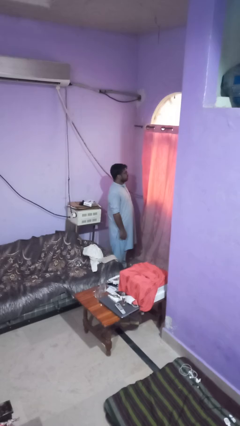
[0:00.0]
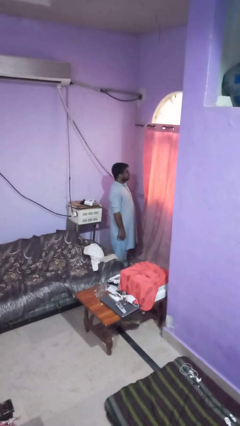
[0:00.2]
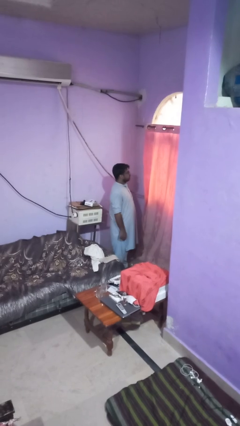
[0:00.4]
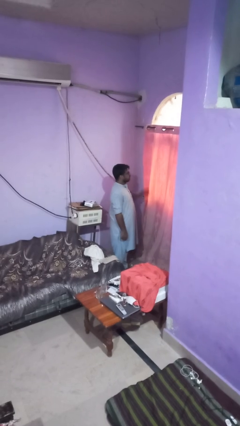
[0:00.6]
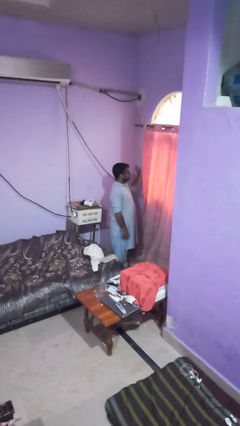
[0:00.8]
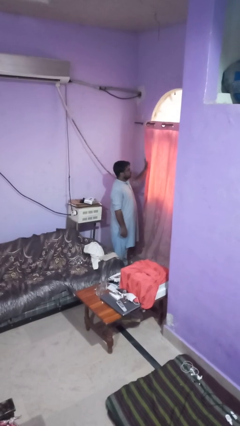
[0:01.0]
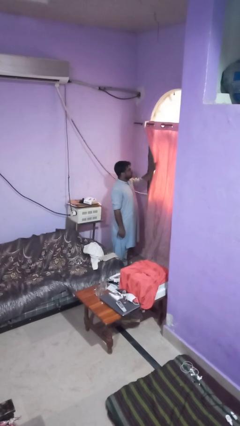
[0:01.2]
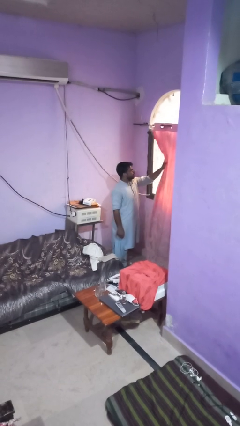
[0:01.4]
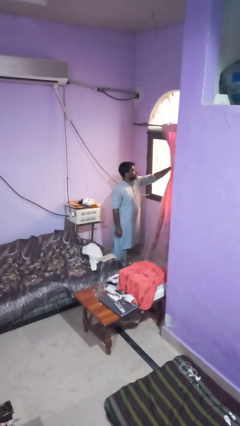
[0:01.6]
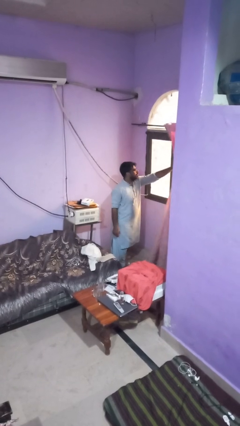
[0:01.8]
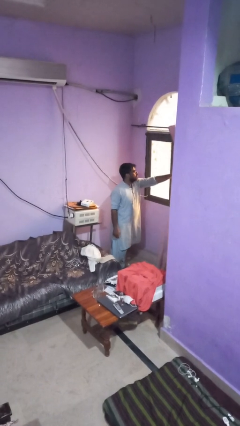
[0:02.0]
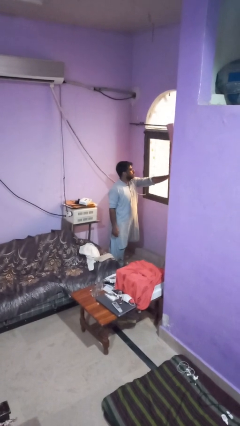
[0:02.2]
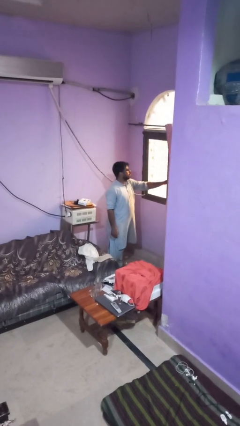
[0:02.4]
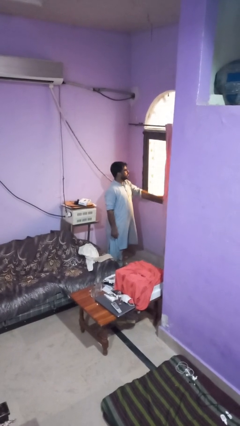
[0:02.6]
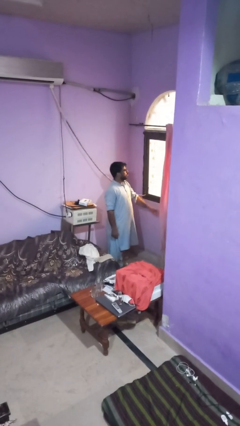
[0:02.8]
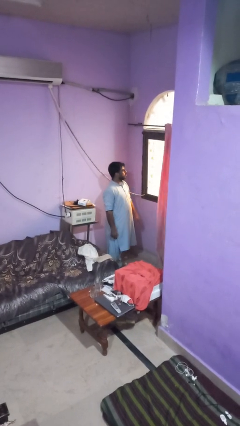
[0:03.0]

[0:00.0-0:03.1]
person opens curtains

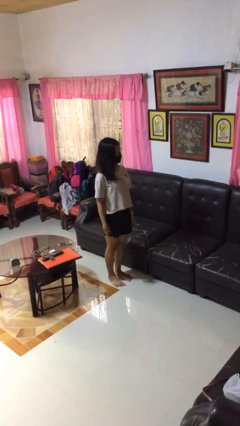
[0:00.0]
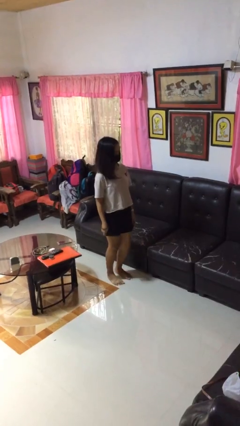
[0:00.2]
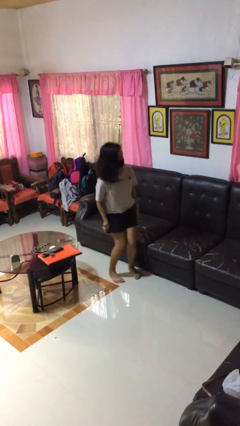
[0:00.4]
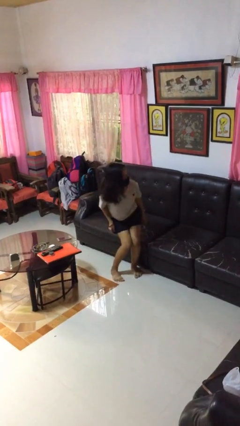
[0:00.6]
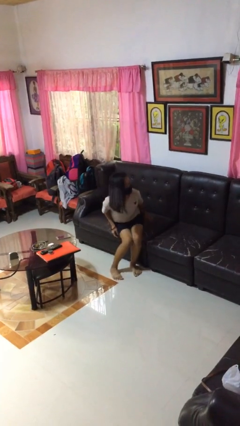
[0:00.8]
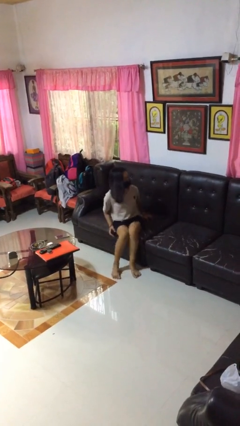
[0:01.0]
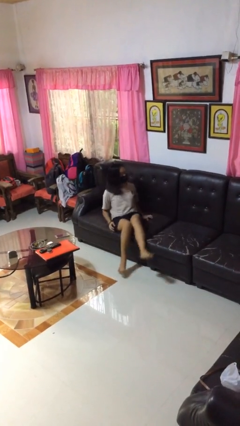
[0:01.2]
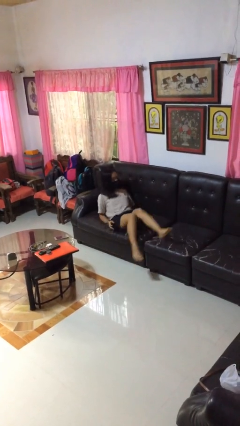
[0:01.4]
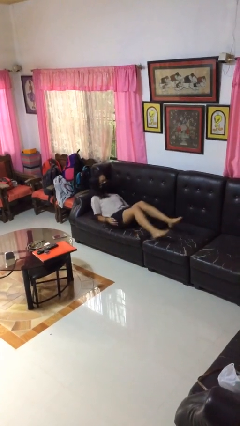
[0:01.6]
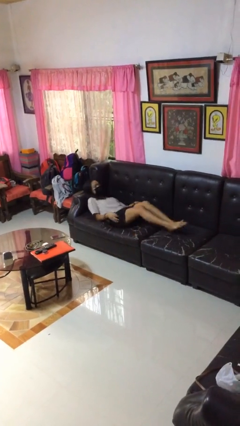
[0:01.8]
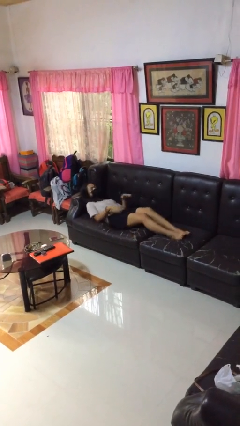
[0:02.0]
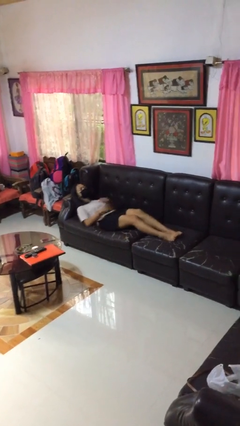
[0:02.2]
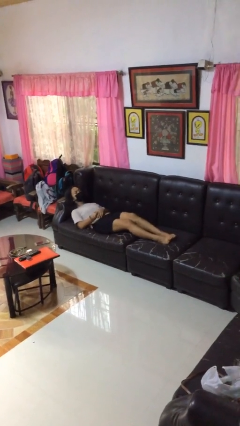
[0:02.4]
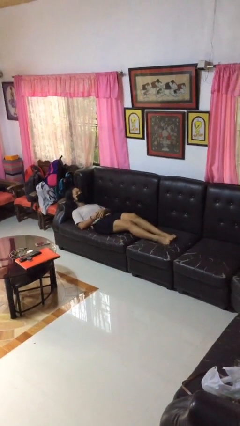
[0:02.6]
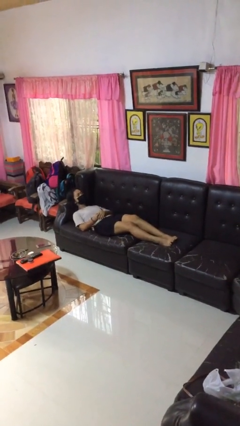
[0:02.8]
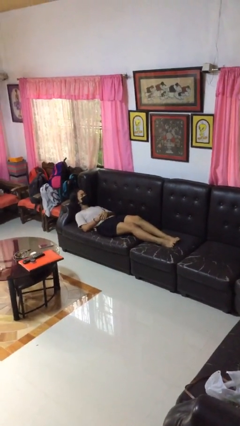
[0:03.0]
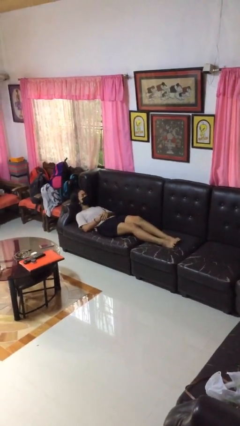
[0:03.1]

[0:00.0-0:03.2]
person lies down on couch

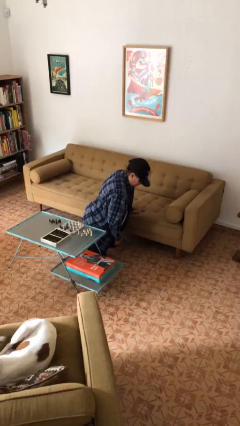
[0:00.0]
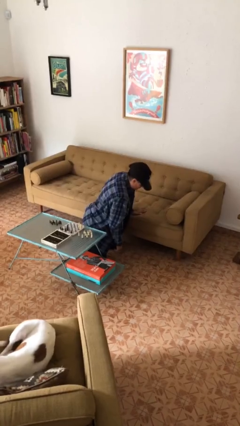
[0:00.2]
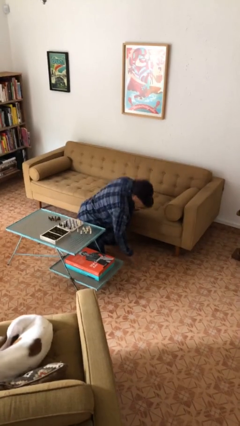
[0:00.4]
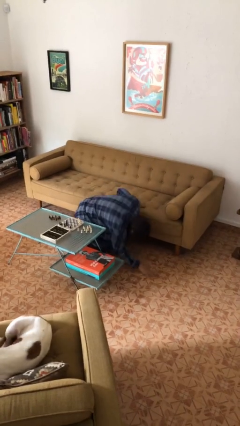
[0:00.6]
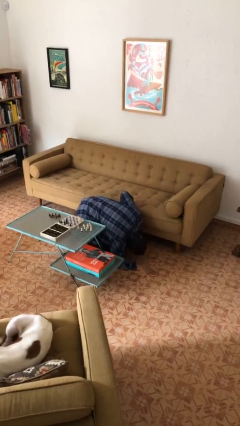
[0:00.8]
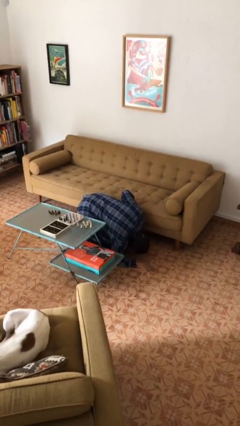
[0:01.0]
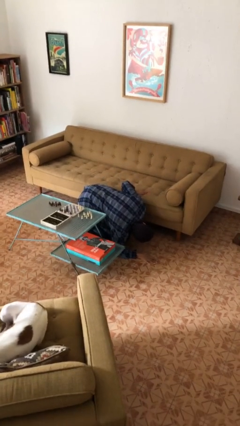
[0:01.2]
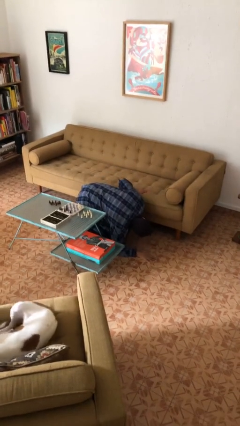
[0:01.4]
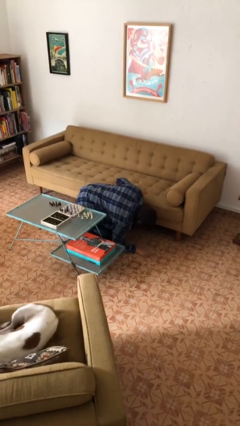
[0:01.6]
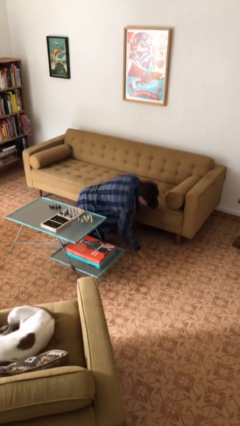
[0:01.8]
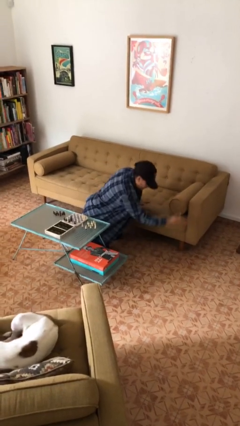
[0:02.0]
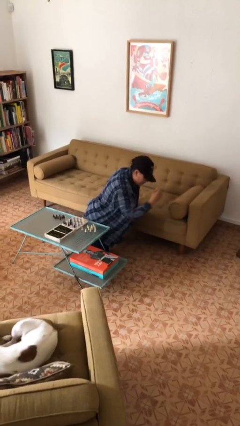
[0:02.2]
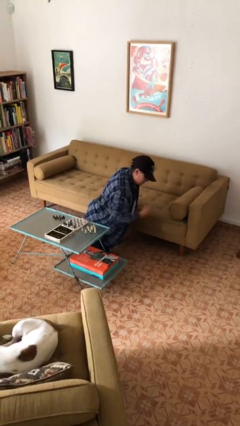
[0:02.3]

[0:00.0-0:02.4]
person searches under couch

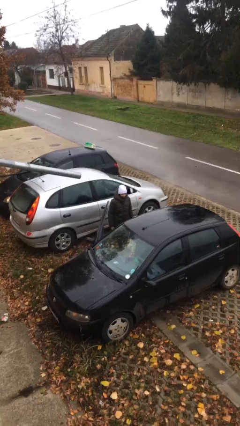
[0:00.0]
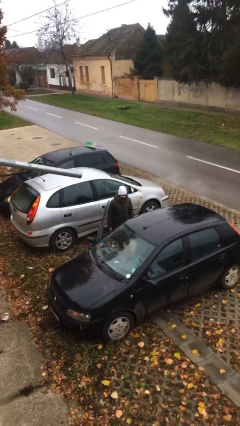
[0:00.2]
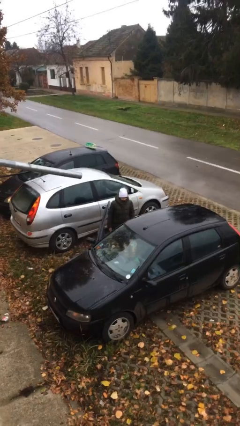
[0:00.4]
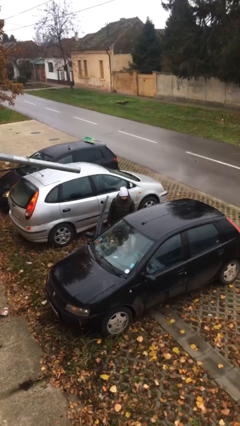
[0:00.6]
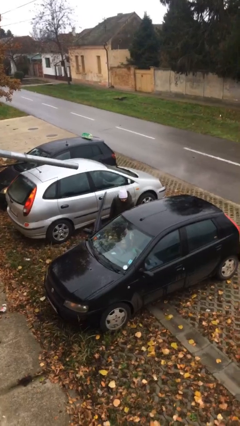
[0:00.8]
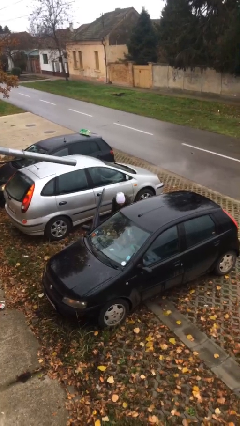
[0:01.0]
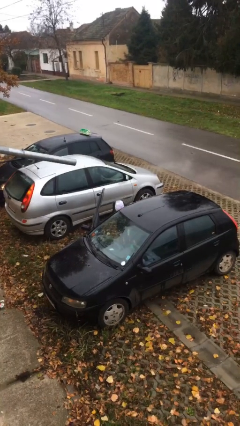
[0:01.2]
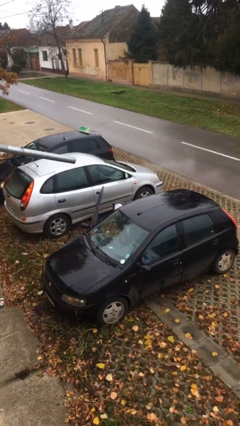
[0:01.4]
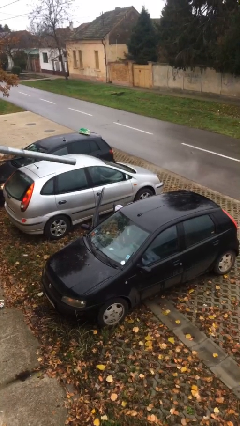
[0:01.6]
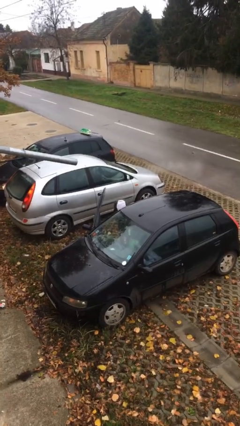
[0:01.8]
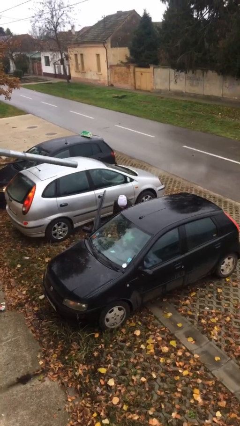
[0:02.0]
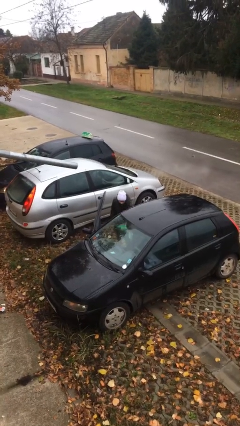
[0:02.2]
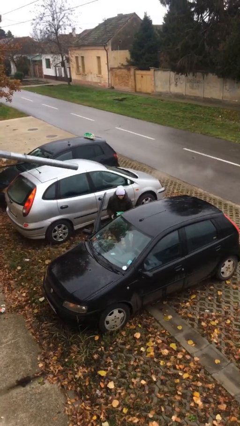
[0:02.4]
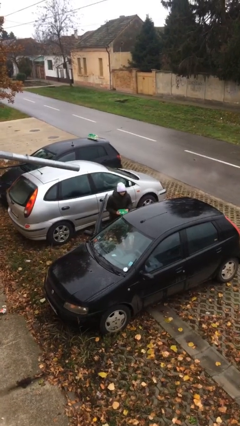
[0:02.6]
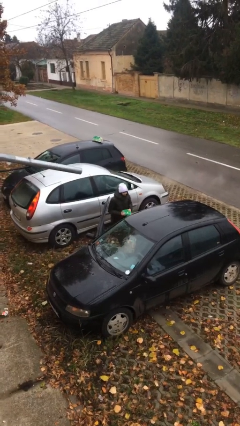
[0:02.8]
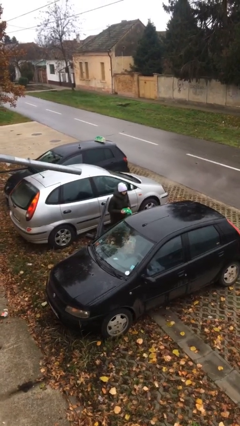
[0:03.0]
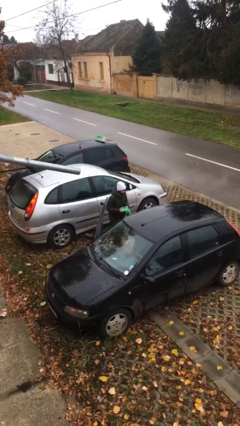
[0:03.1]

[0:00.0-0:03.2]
person unloads car

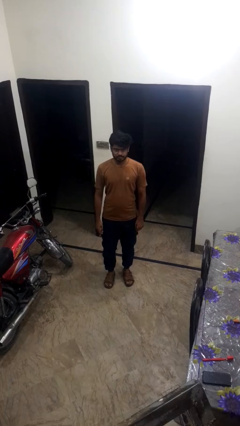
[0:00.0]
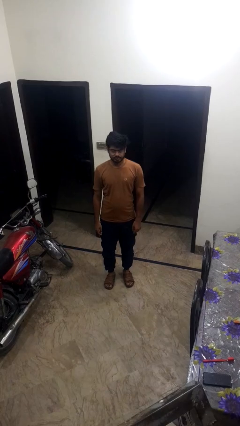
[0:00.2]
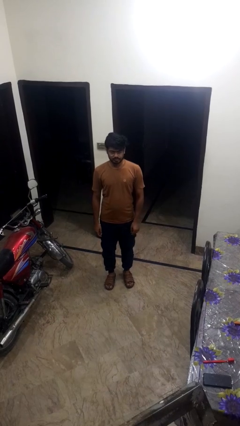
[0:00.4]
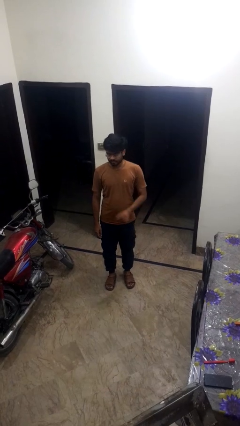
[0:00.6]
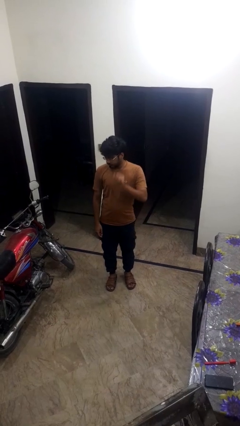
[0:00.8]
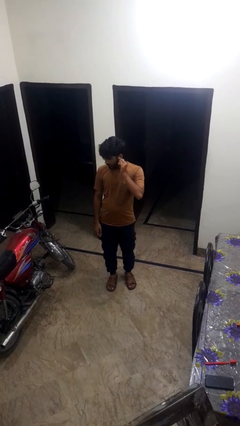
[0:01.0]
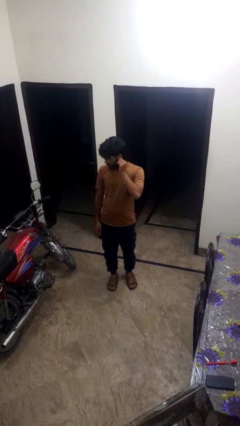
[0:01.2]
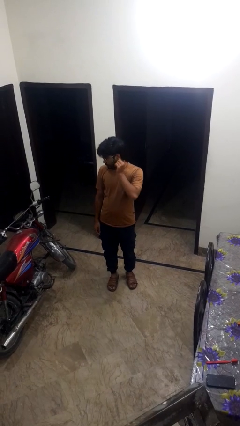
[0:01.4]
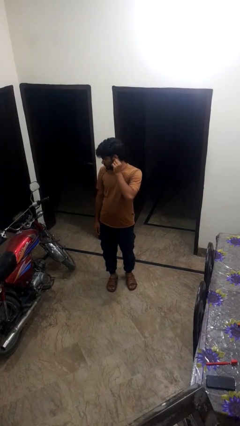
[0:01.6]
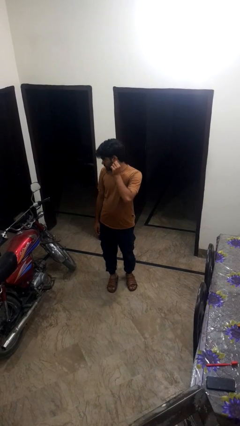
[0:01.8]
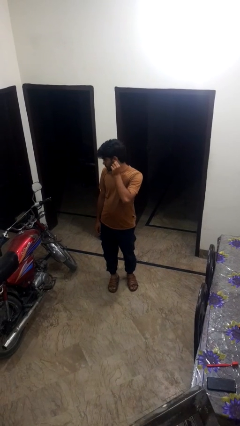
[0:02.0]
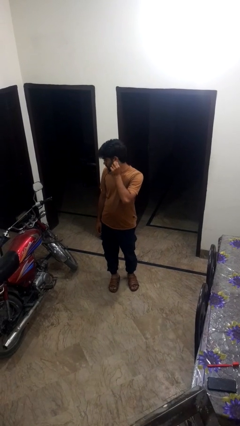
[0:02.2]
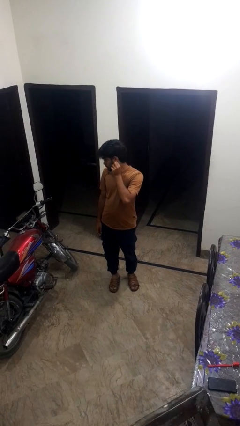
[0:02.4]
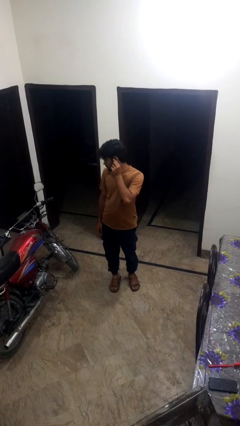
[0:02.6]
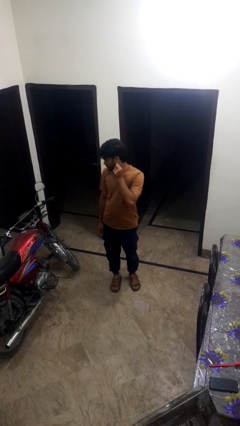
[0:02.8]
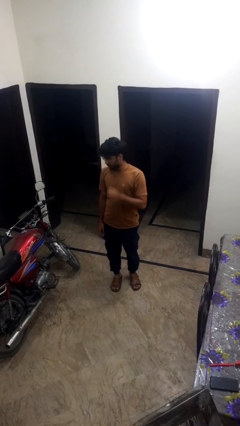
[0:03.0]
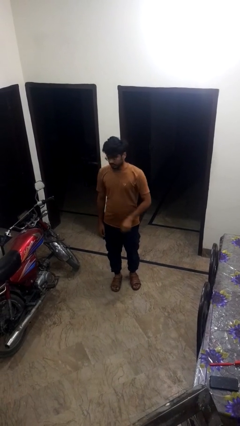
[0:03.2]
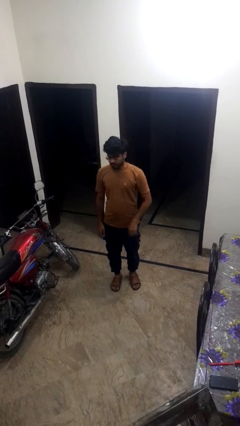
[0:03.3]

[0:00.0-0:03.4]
person touches earlobe

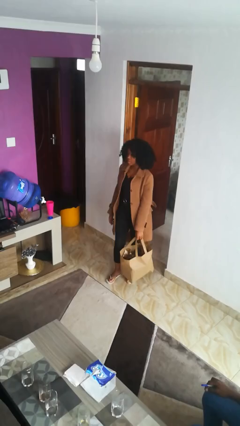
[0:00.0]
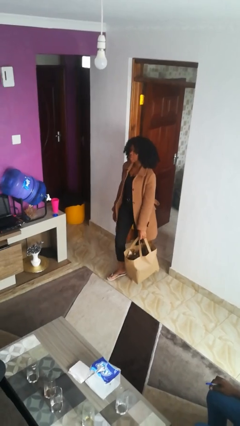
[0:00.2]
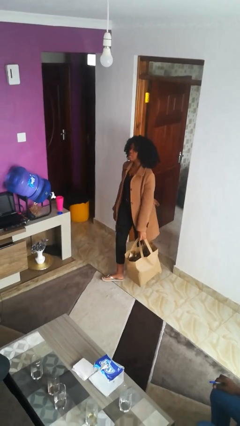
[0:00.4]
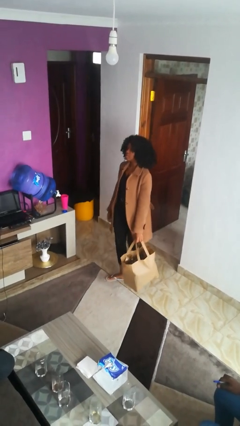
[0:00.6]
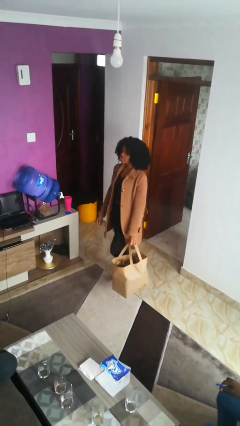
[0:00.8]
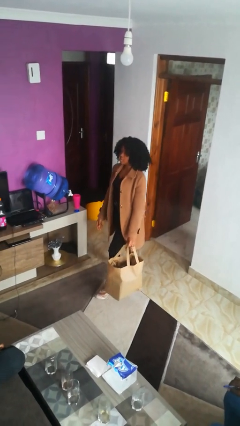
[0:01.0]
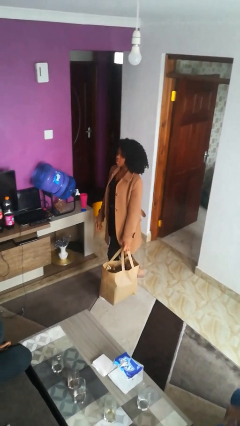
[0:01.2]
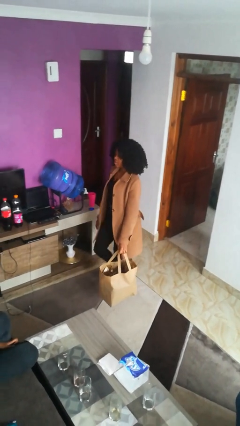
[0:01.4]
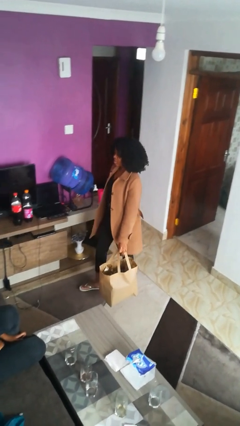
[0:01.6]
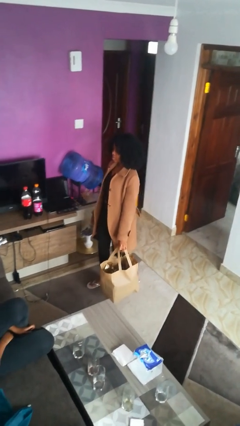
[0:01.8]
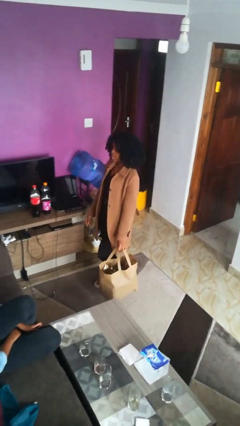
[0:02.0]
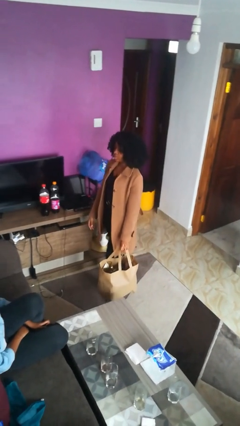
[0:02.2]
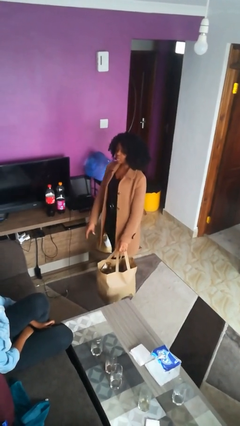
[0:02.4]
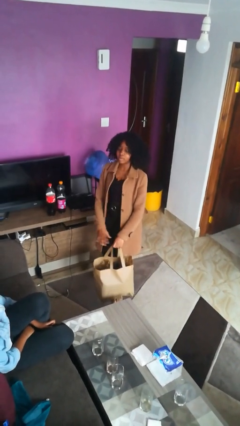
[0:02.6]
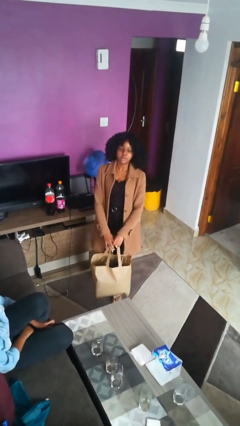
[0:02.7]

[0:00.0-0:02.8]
person carries groceries
